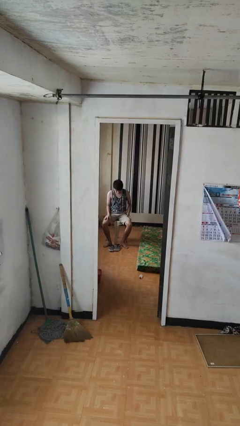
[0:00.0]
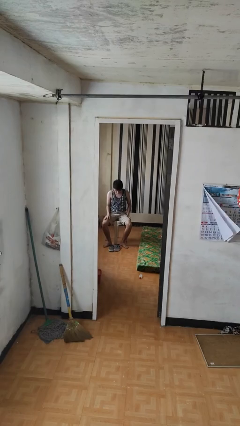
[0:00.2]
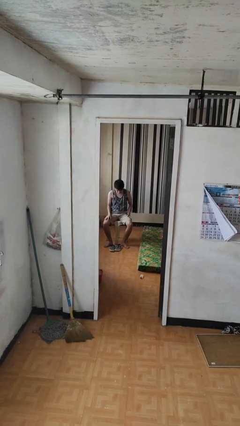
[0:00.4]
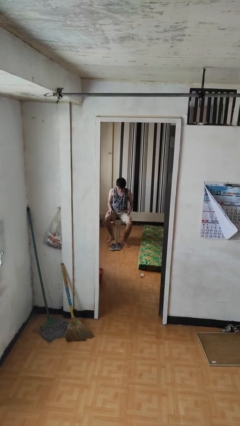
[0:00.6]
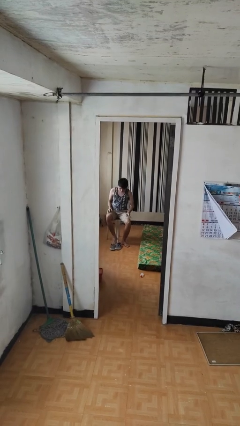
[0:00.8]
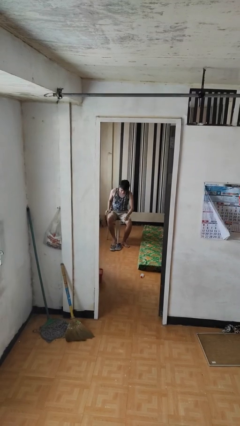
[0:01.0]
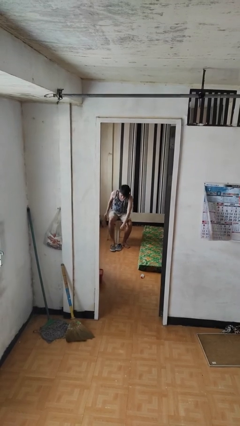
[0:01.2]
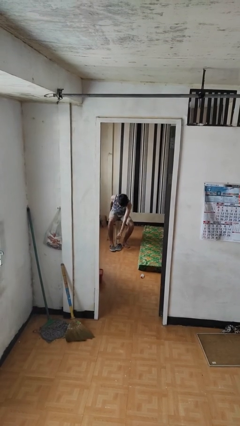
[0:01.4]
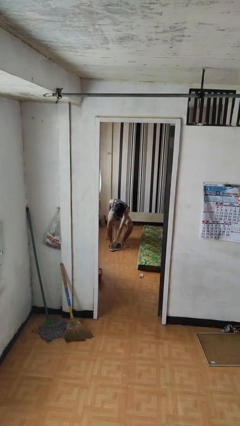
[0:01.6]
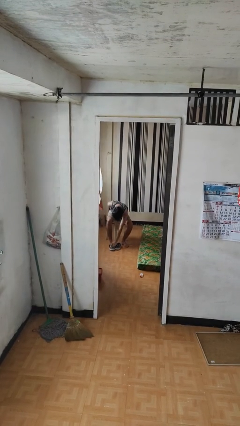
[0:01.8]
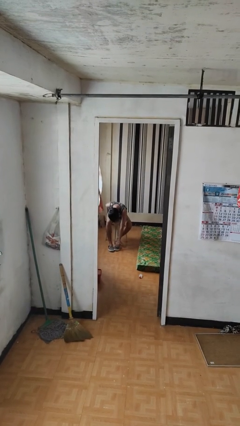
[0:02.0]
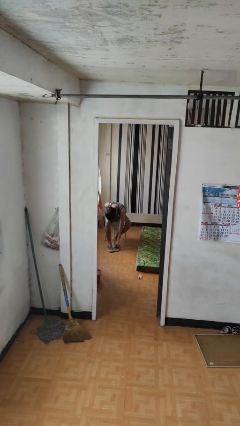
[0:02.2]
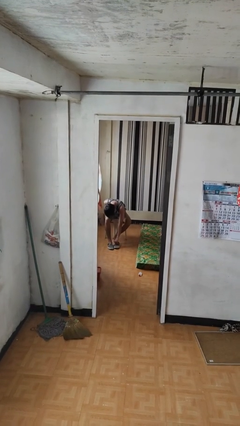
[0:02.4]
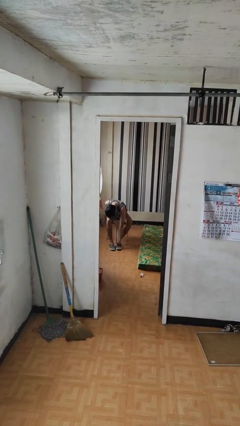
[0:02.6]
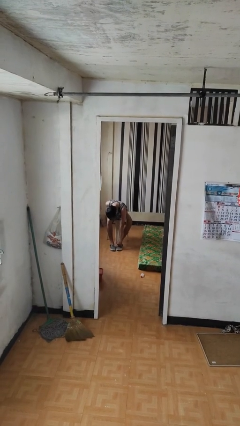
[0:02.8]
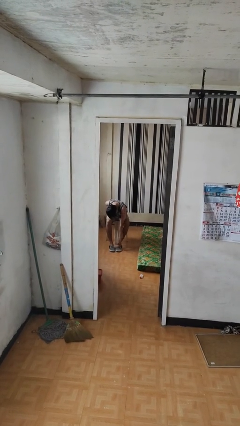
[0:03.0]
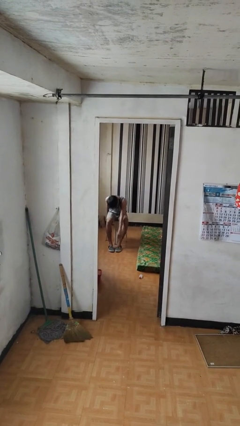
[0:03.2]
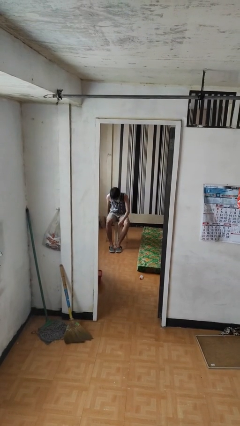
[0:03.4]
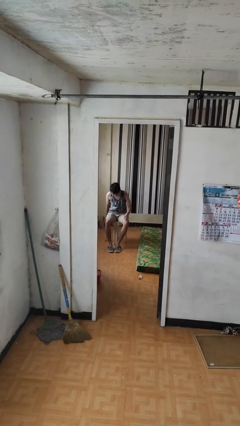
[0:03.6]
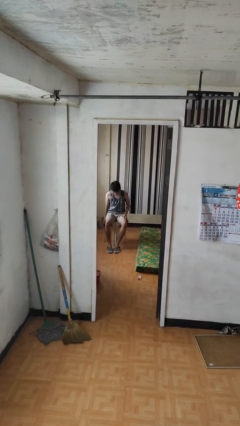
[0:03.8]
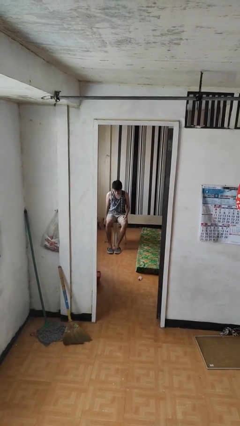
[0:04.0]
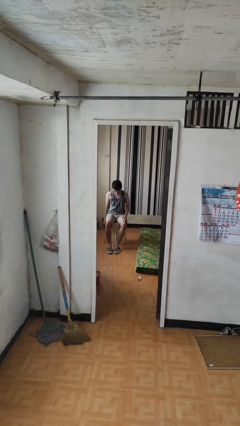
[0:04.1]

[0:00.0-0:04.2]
person puts on shoes

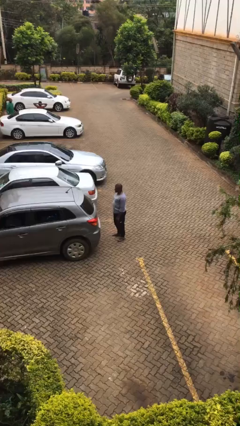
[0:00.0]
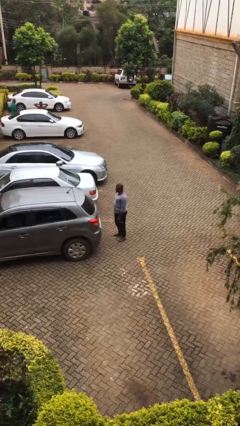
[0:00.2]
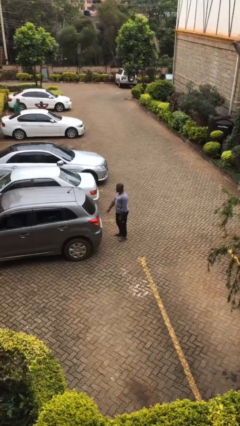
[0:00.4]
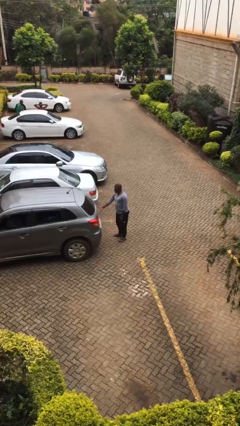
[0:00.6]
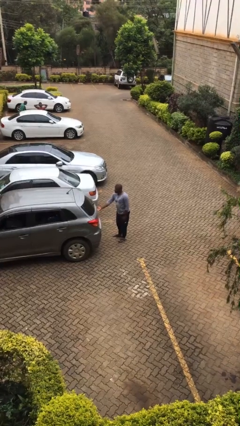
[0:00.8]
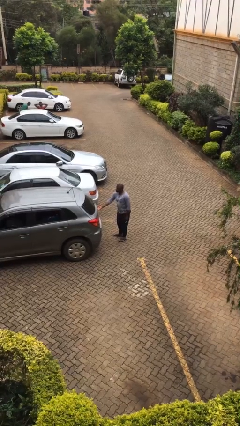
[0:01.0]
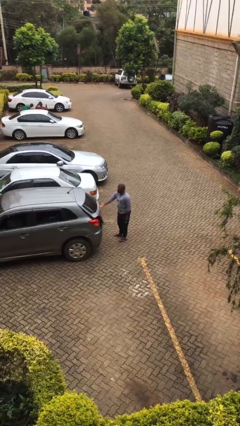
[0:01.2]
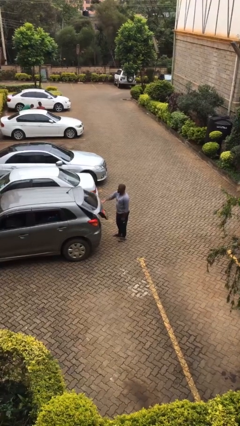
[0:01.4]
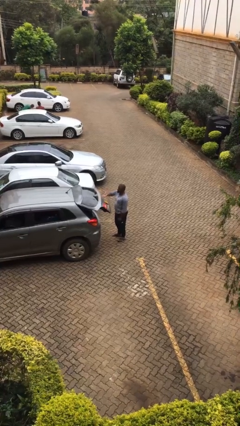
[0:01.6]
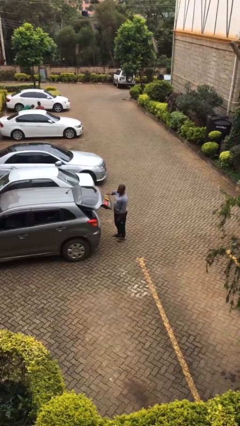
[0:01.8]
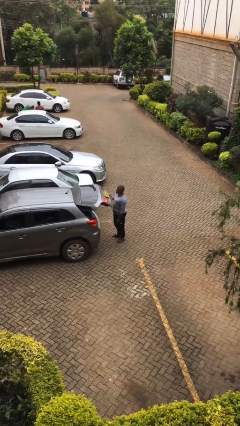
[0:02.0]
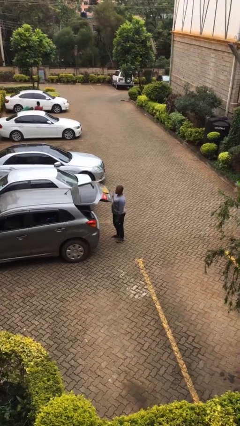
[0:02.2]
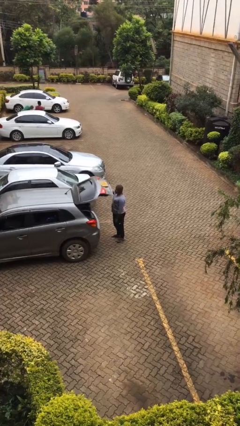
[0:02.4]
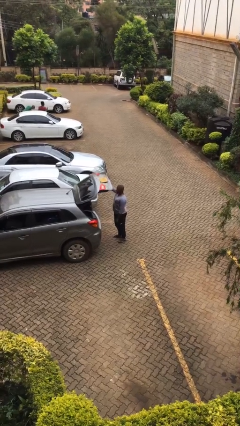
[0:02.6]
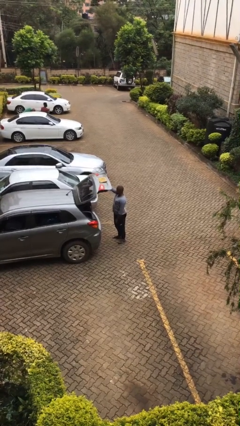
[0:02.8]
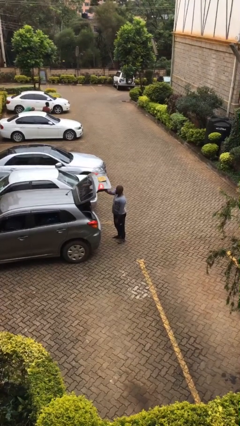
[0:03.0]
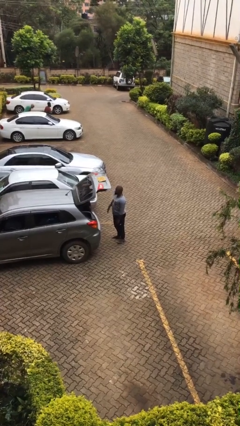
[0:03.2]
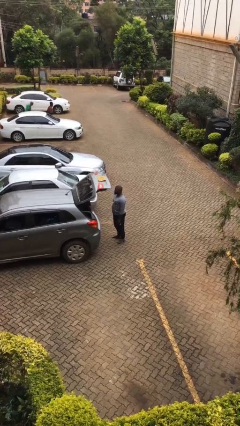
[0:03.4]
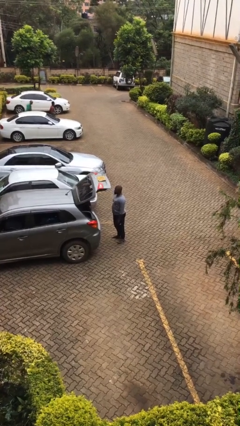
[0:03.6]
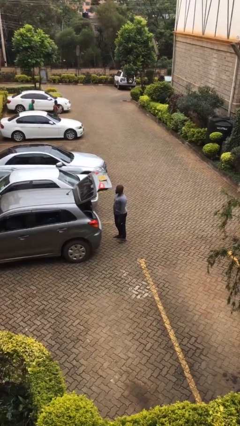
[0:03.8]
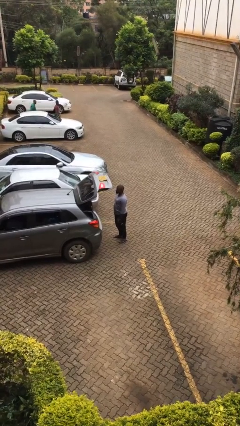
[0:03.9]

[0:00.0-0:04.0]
person opens car trunk

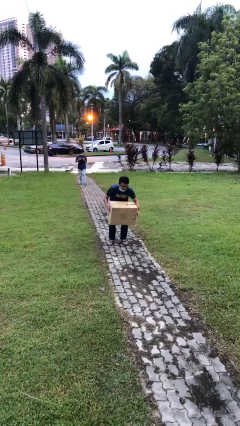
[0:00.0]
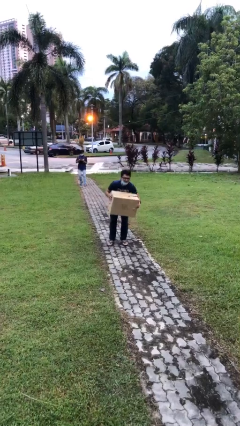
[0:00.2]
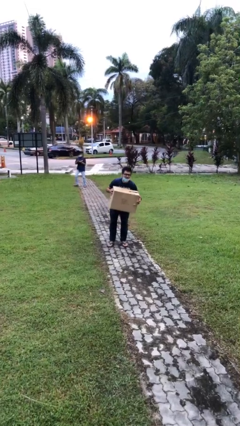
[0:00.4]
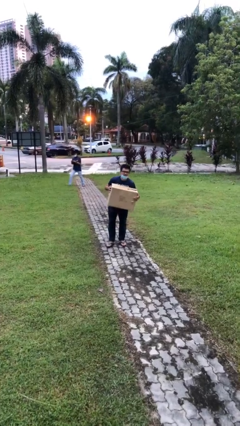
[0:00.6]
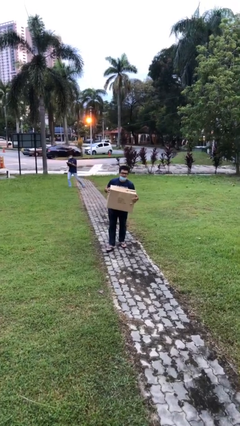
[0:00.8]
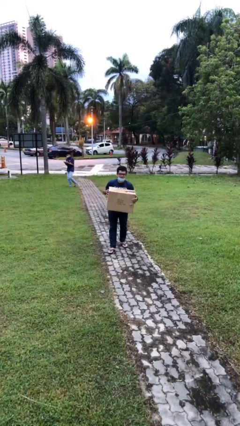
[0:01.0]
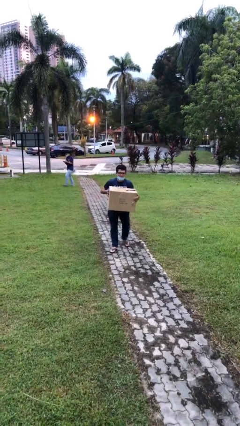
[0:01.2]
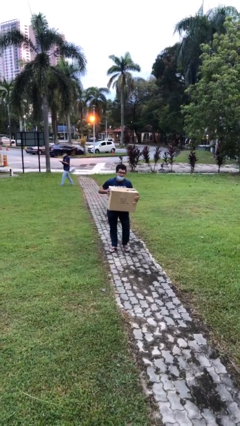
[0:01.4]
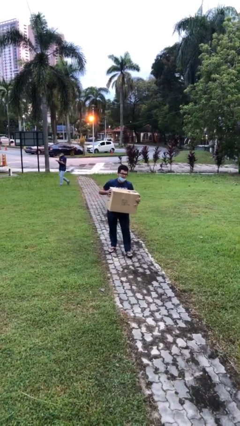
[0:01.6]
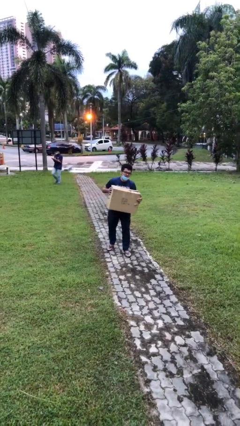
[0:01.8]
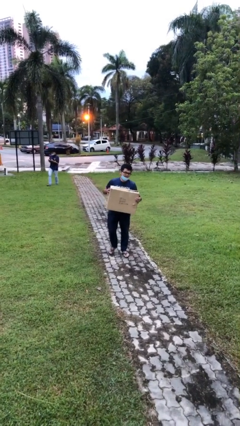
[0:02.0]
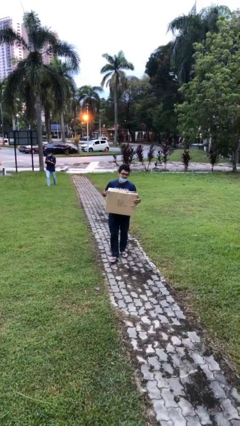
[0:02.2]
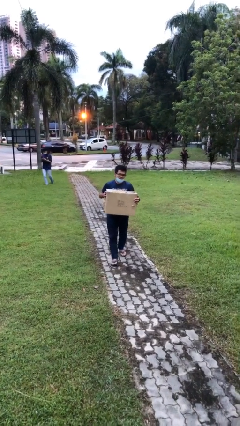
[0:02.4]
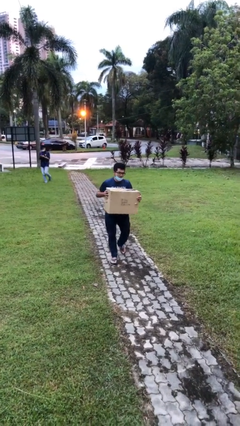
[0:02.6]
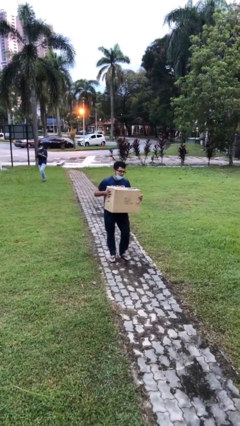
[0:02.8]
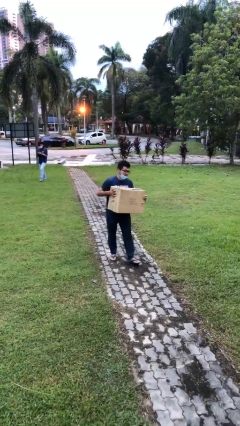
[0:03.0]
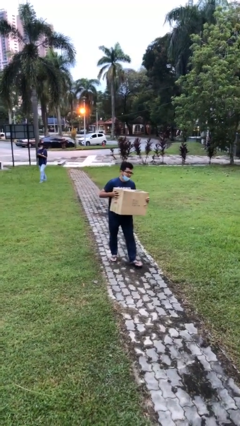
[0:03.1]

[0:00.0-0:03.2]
person carries heavy object

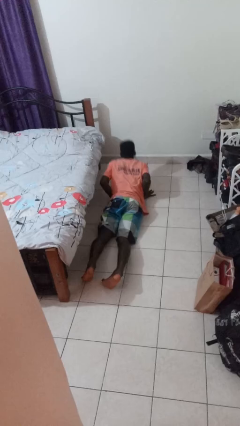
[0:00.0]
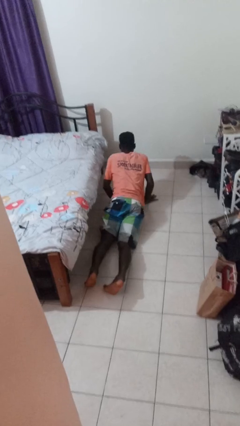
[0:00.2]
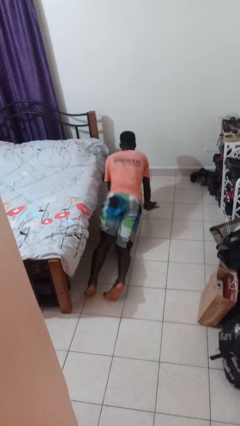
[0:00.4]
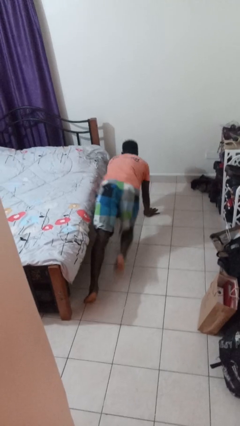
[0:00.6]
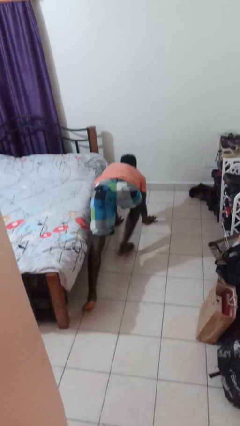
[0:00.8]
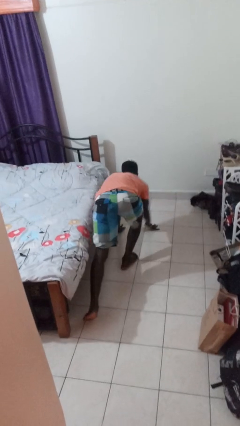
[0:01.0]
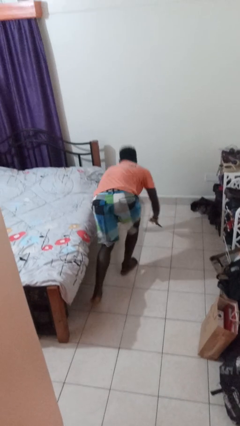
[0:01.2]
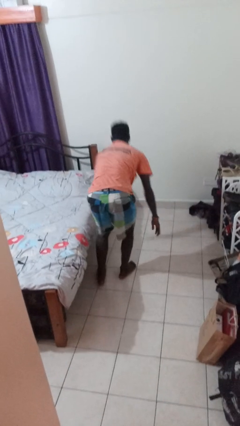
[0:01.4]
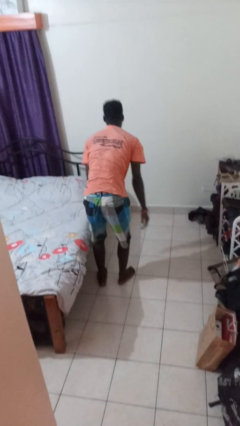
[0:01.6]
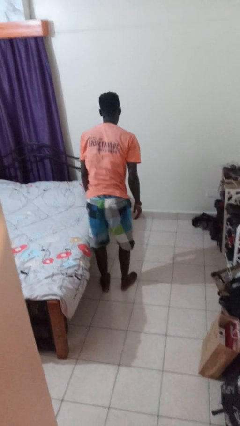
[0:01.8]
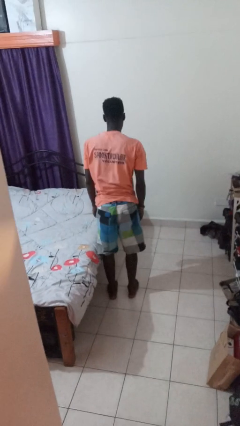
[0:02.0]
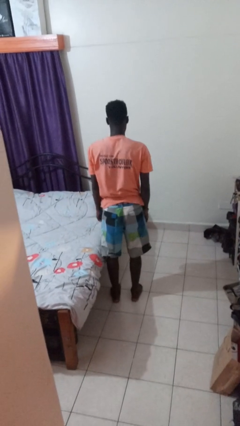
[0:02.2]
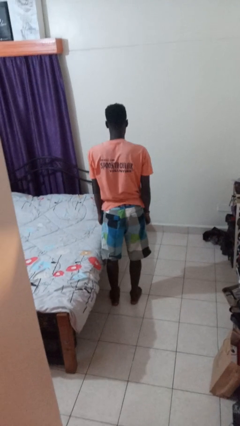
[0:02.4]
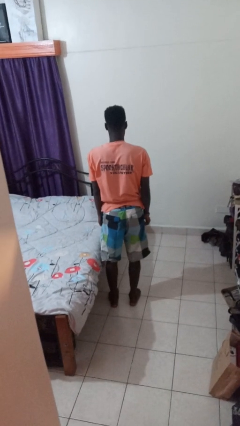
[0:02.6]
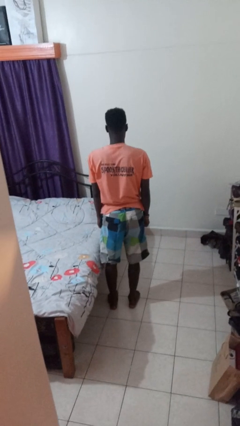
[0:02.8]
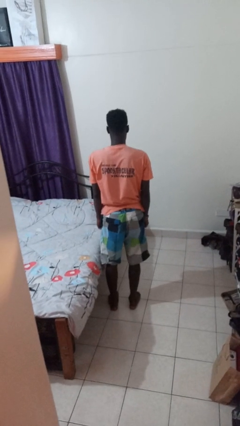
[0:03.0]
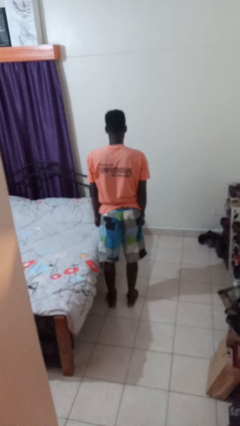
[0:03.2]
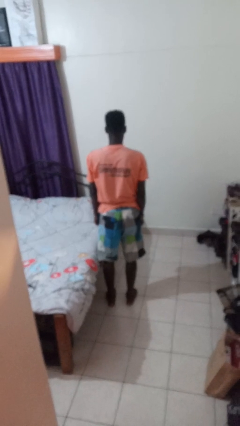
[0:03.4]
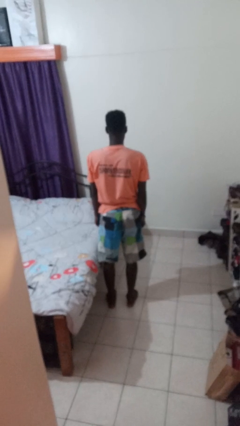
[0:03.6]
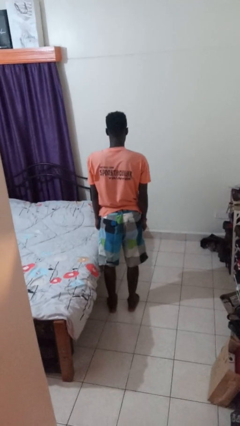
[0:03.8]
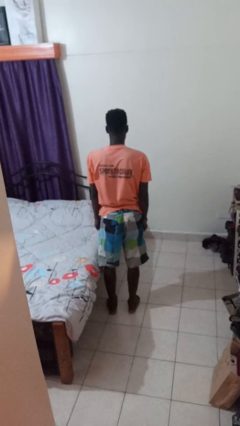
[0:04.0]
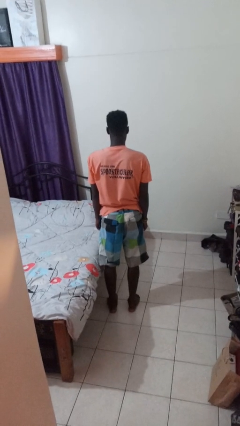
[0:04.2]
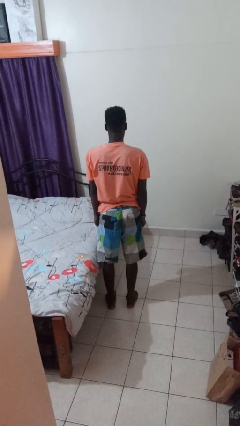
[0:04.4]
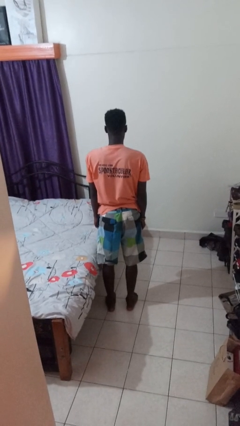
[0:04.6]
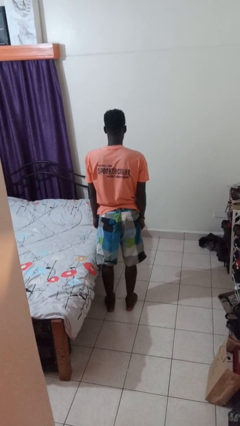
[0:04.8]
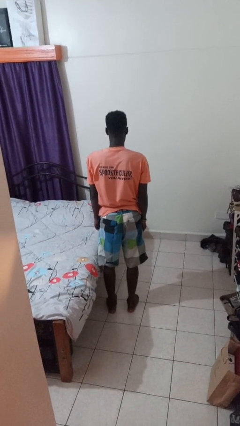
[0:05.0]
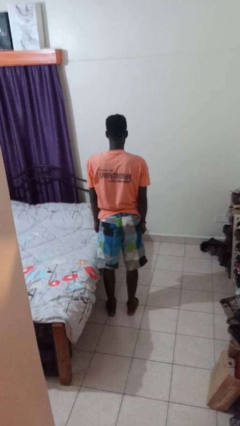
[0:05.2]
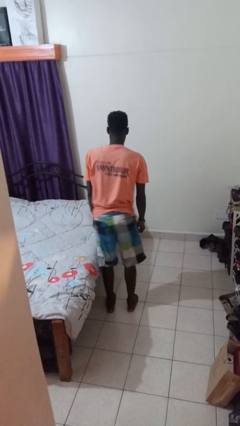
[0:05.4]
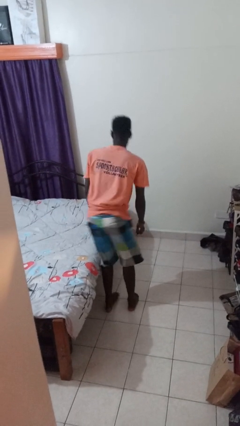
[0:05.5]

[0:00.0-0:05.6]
person stands up from floor

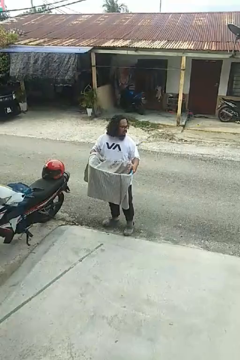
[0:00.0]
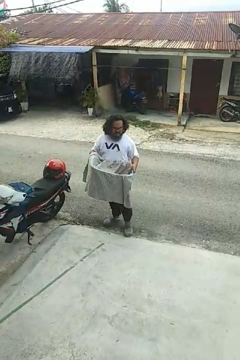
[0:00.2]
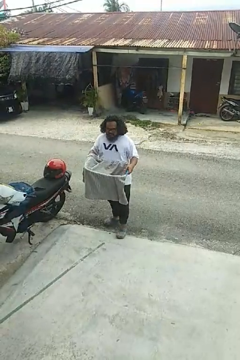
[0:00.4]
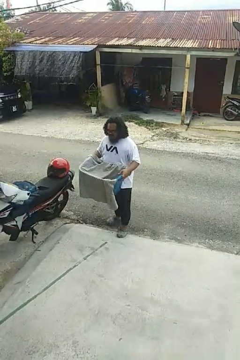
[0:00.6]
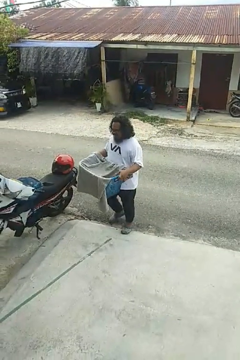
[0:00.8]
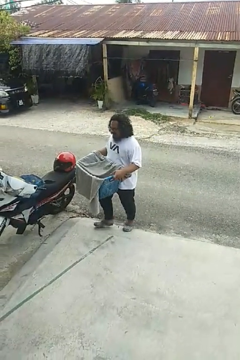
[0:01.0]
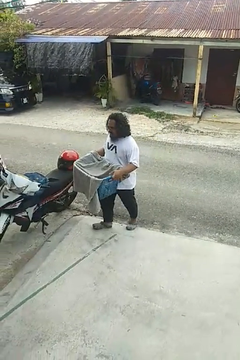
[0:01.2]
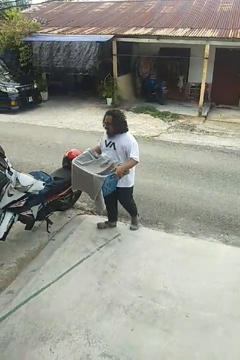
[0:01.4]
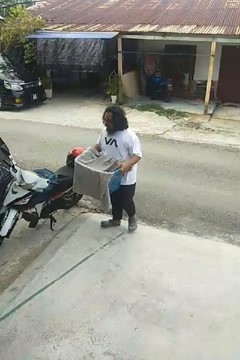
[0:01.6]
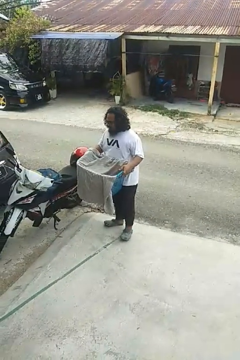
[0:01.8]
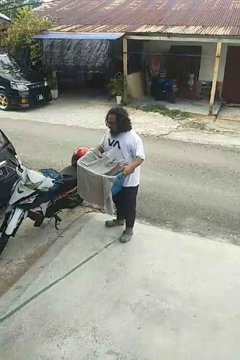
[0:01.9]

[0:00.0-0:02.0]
person carries laundry basket
